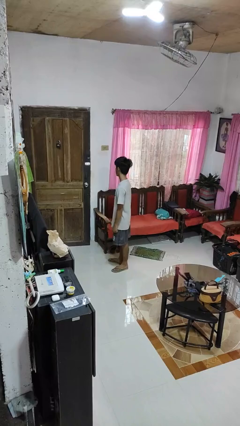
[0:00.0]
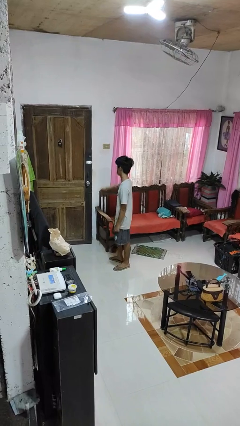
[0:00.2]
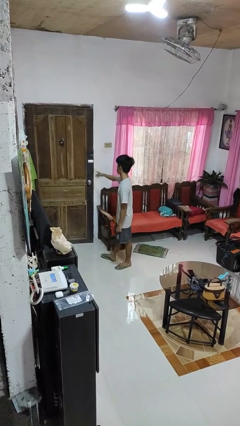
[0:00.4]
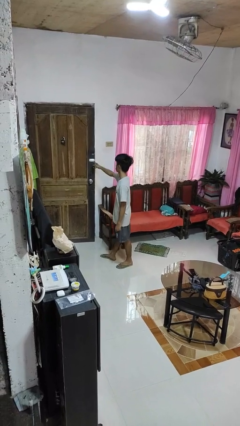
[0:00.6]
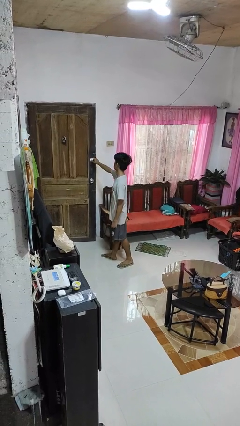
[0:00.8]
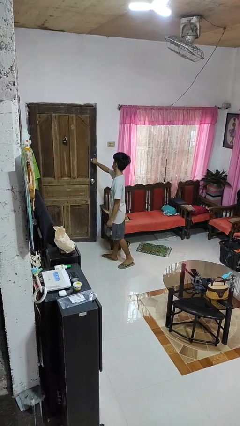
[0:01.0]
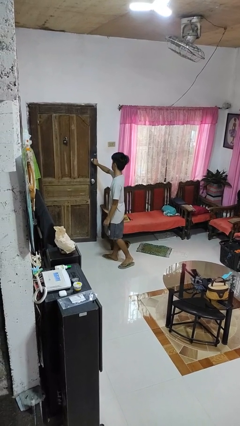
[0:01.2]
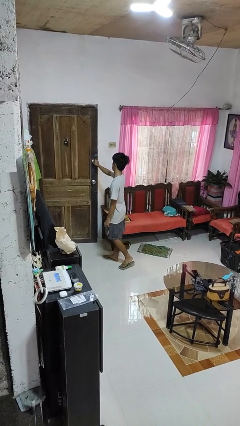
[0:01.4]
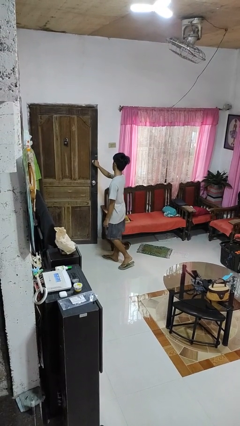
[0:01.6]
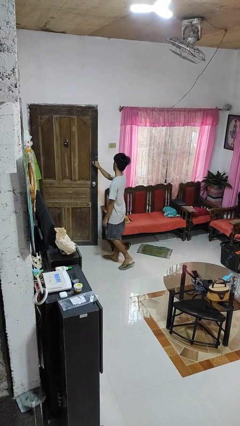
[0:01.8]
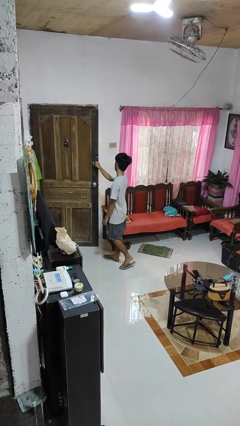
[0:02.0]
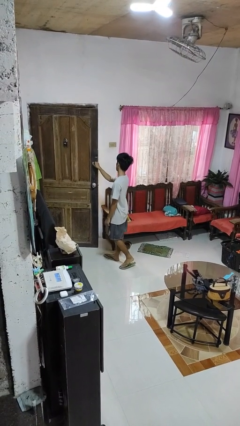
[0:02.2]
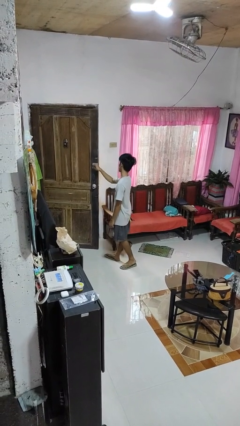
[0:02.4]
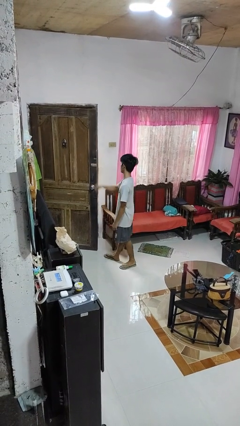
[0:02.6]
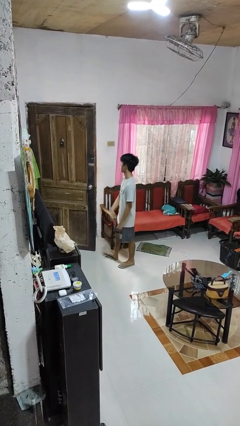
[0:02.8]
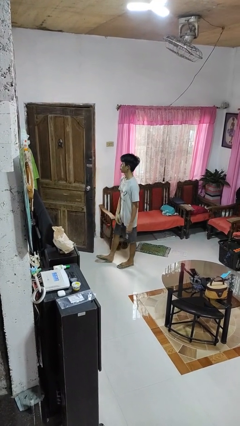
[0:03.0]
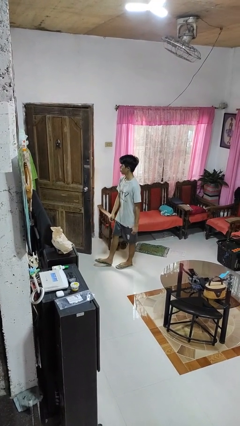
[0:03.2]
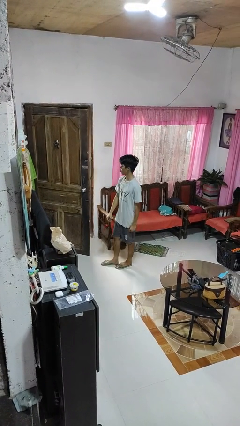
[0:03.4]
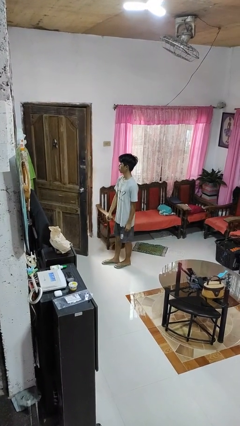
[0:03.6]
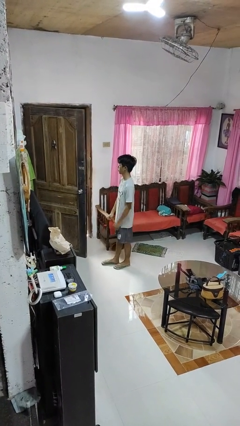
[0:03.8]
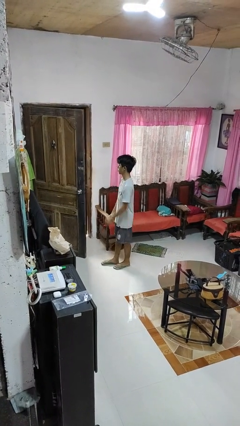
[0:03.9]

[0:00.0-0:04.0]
person opens facility door

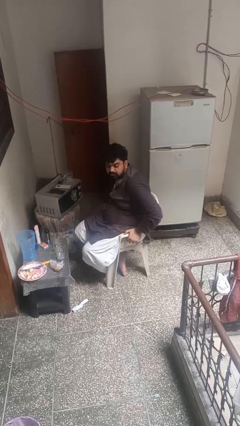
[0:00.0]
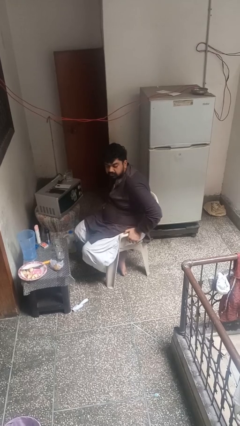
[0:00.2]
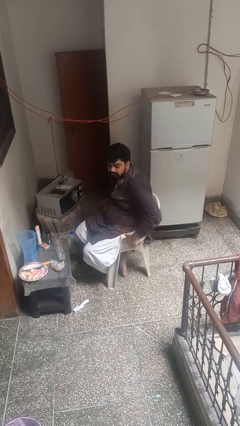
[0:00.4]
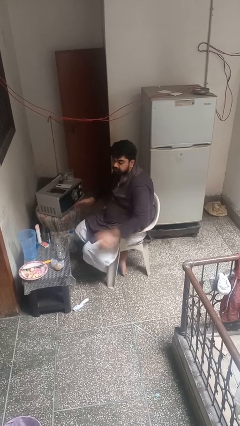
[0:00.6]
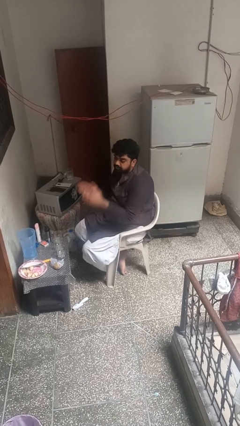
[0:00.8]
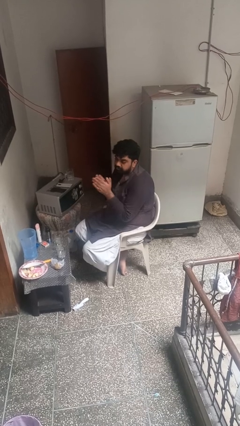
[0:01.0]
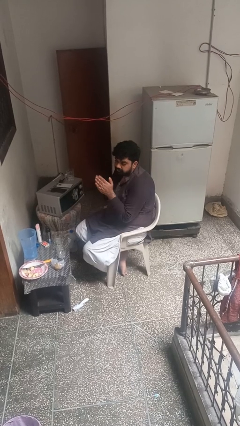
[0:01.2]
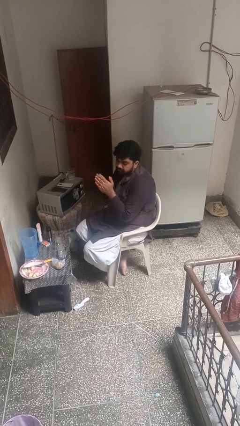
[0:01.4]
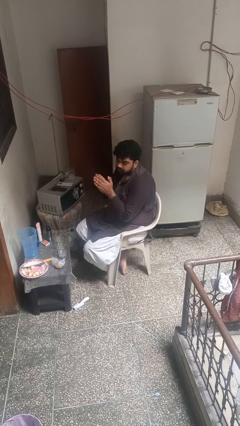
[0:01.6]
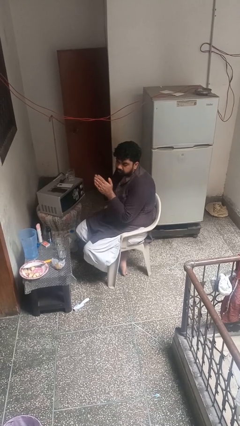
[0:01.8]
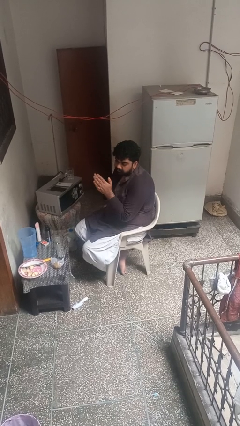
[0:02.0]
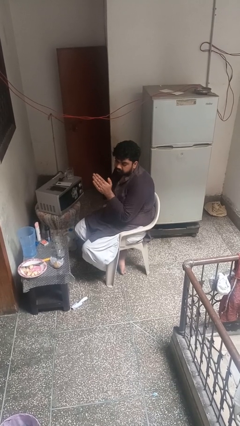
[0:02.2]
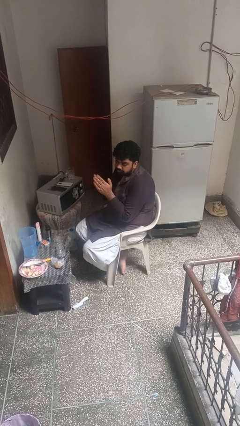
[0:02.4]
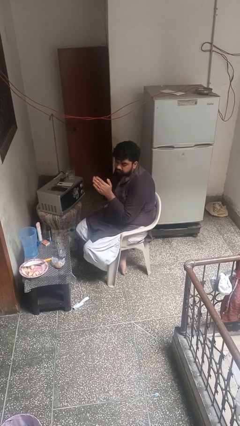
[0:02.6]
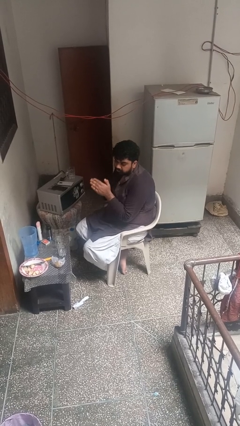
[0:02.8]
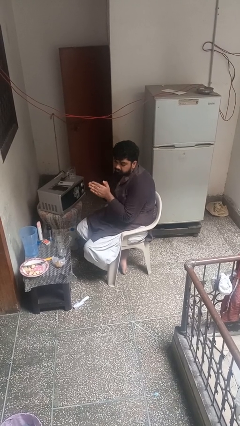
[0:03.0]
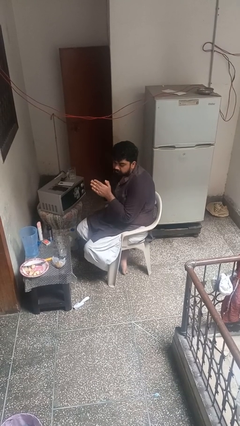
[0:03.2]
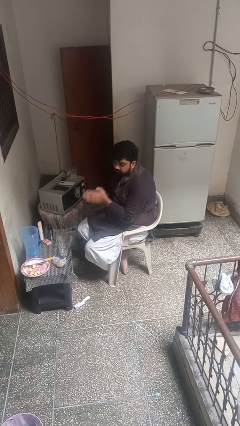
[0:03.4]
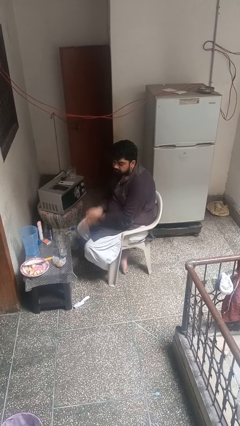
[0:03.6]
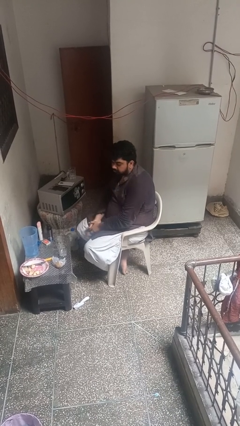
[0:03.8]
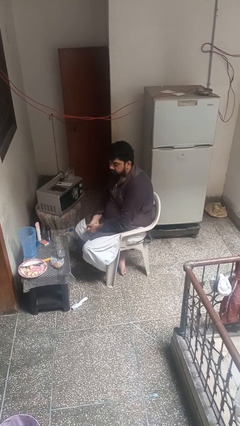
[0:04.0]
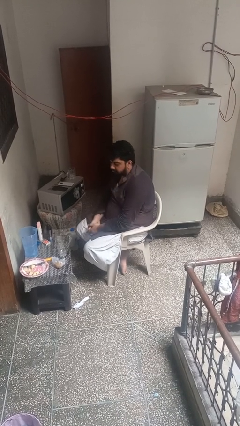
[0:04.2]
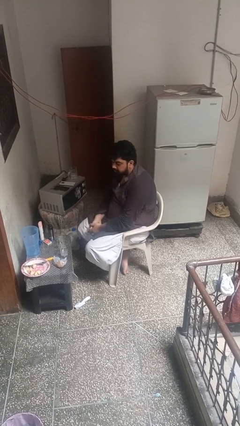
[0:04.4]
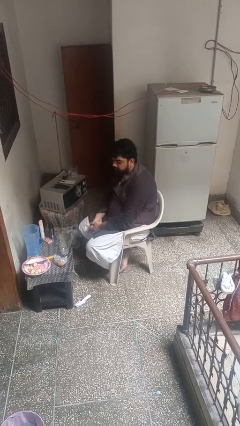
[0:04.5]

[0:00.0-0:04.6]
person claps hands

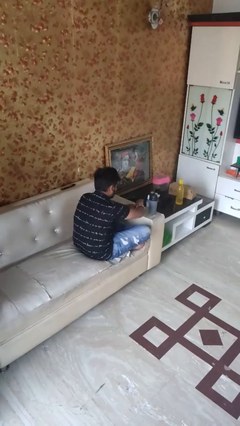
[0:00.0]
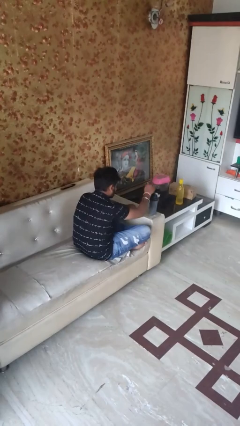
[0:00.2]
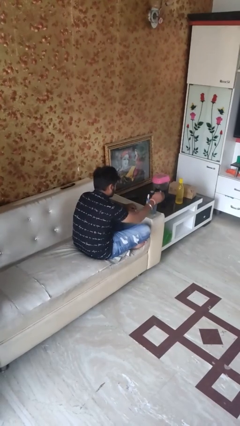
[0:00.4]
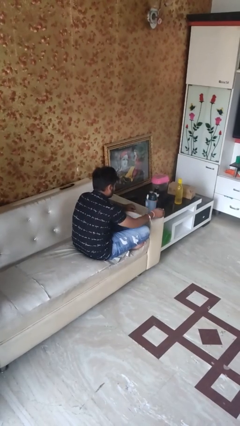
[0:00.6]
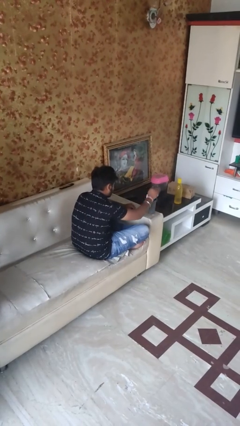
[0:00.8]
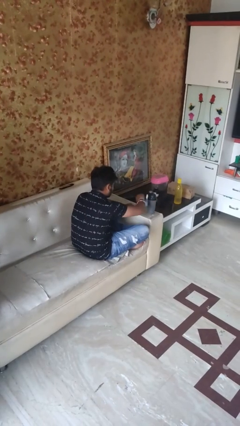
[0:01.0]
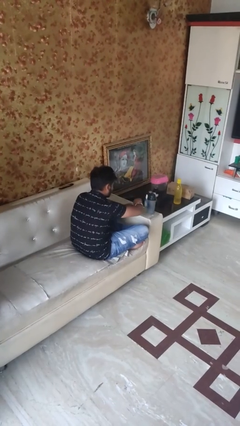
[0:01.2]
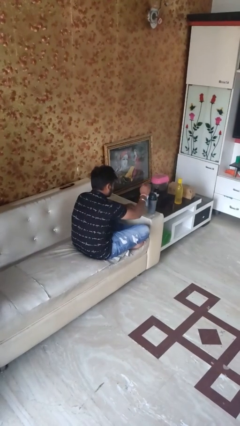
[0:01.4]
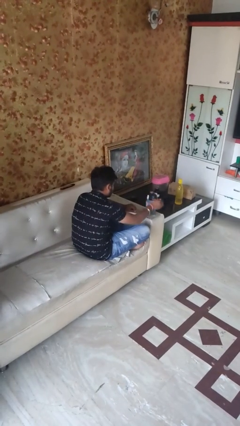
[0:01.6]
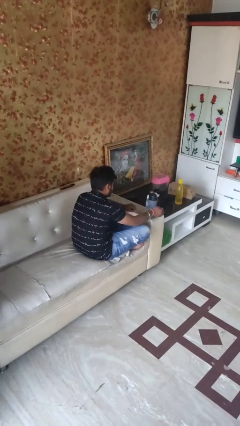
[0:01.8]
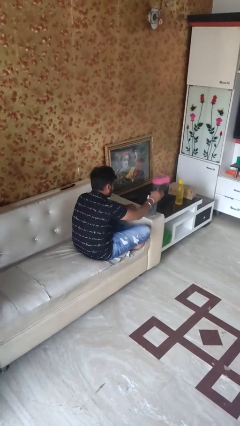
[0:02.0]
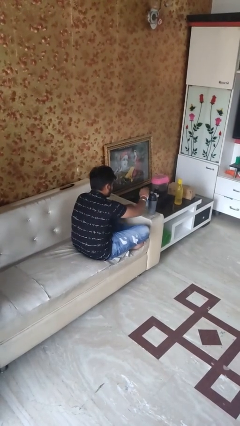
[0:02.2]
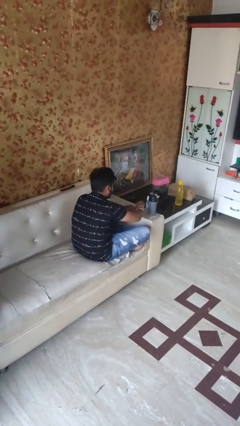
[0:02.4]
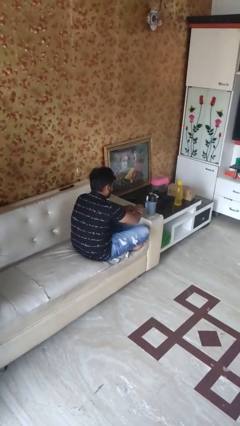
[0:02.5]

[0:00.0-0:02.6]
person waves hand over object

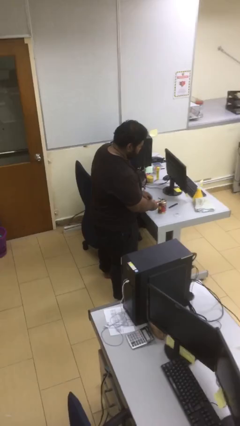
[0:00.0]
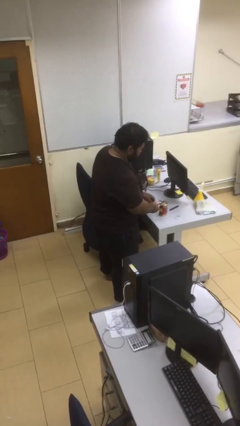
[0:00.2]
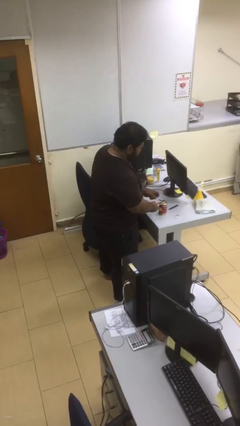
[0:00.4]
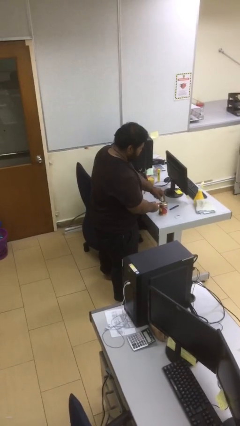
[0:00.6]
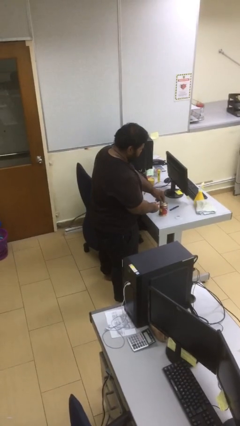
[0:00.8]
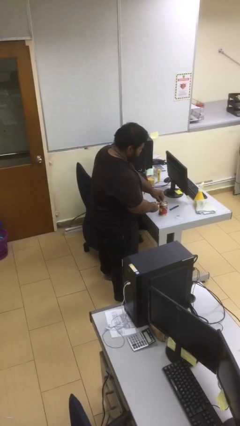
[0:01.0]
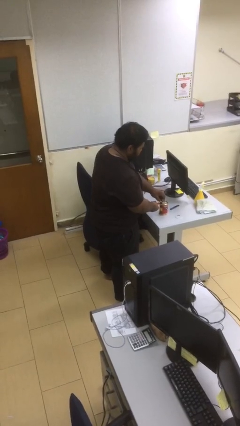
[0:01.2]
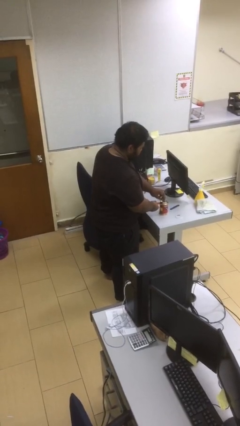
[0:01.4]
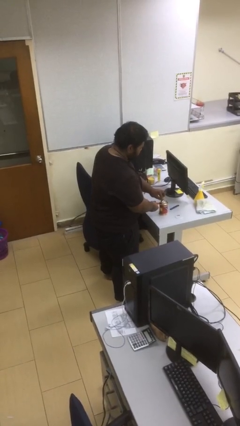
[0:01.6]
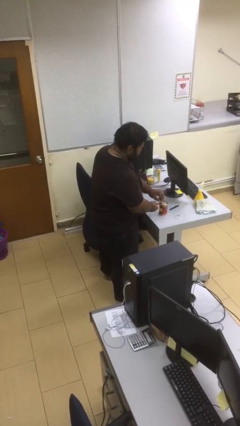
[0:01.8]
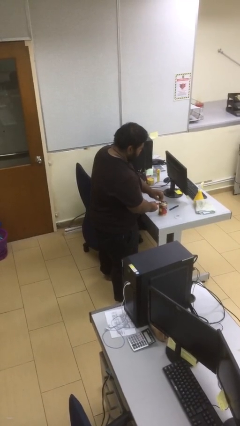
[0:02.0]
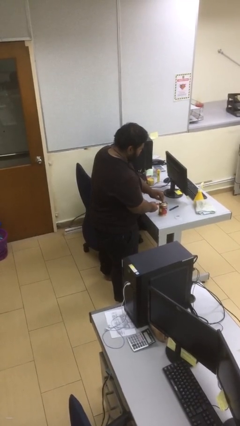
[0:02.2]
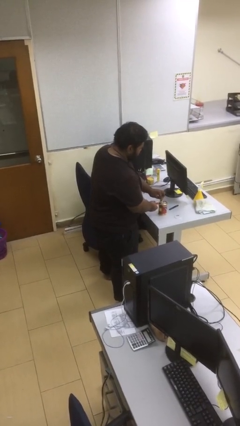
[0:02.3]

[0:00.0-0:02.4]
person opens can with can opener

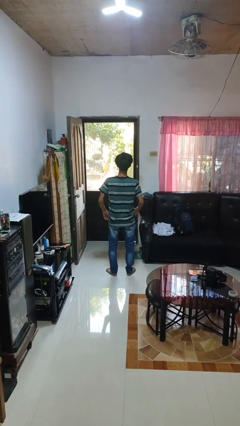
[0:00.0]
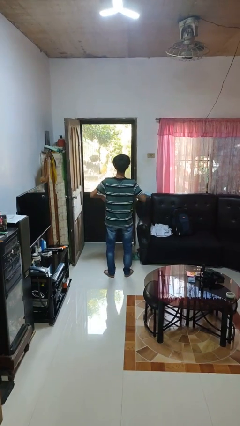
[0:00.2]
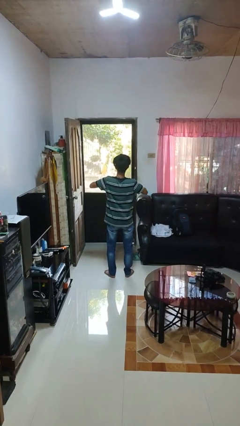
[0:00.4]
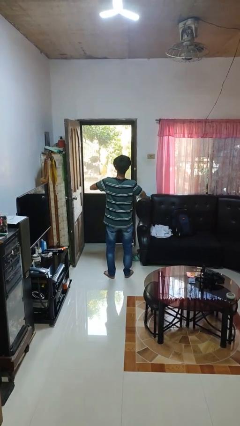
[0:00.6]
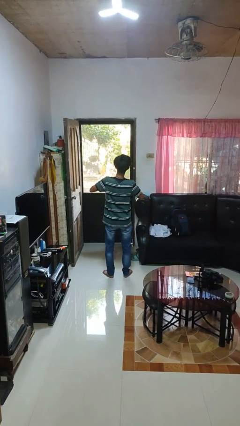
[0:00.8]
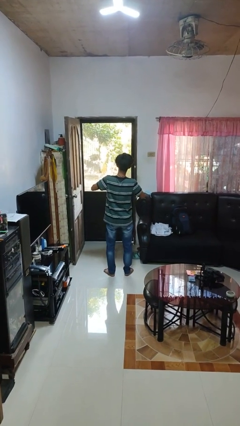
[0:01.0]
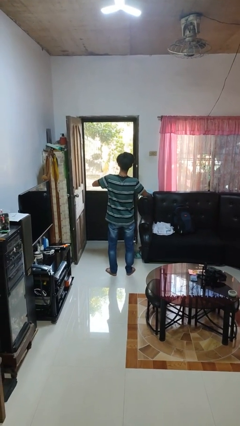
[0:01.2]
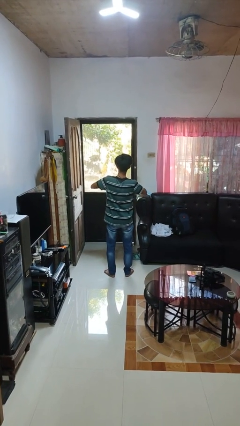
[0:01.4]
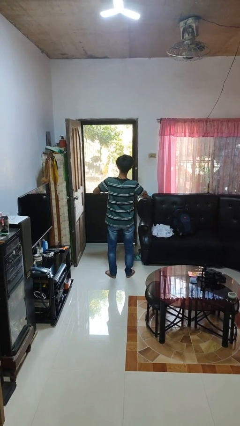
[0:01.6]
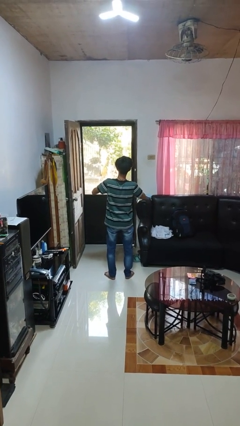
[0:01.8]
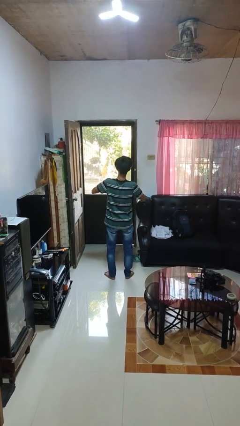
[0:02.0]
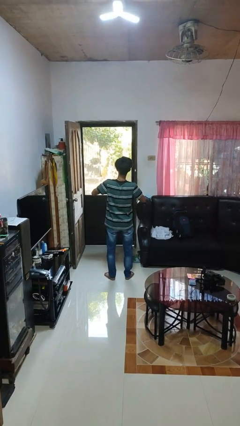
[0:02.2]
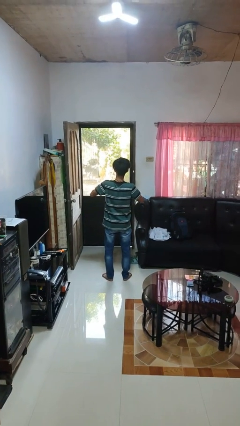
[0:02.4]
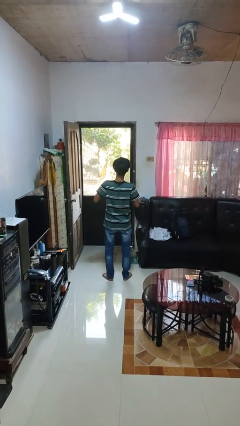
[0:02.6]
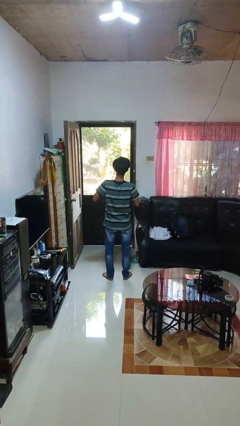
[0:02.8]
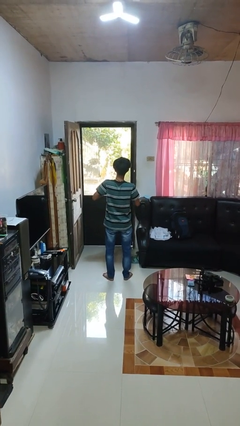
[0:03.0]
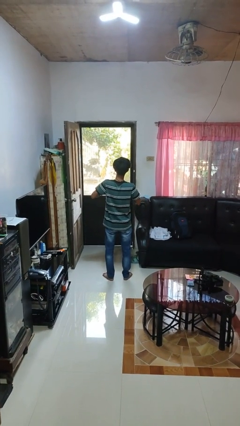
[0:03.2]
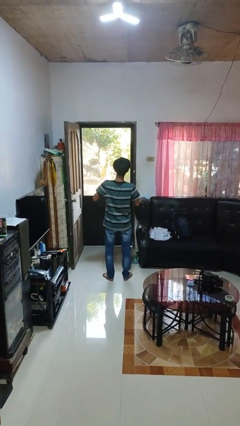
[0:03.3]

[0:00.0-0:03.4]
person unbuttons shirt

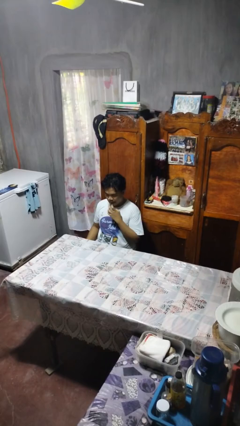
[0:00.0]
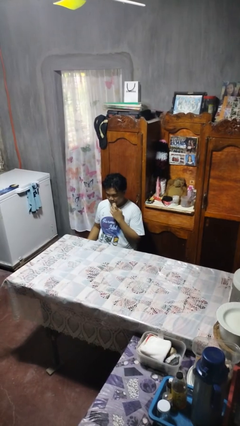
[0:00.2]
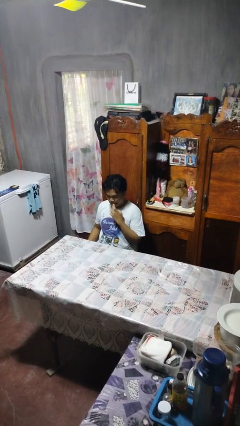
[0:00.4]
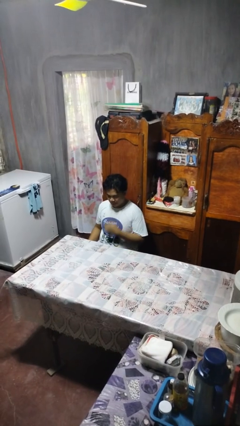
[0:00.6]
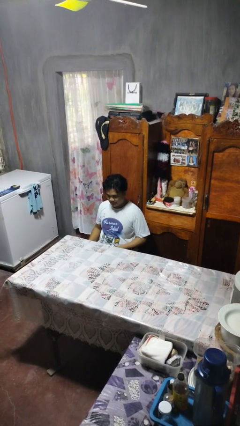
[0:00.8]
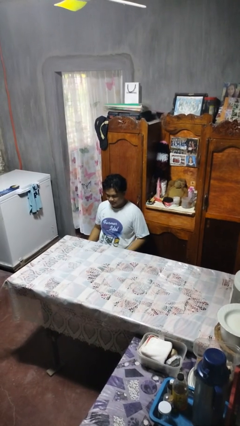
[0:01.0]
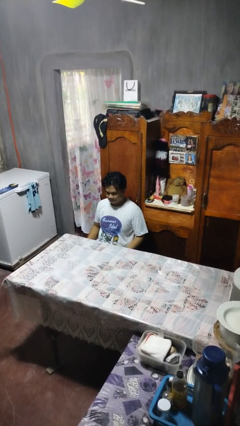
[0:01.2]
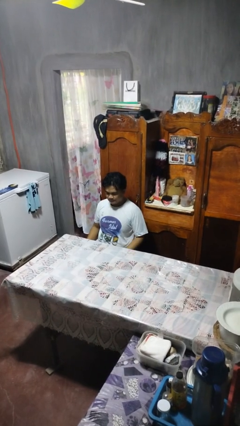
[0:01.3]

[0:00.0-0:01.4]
person licks fingers
